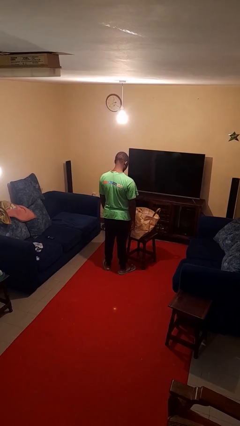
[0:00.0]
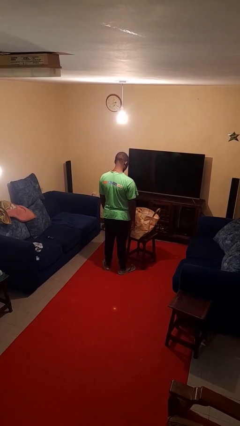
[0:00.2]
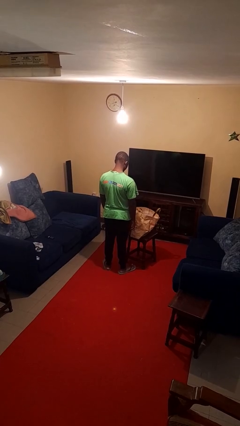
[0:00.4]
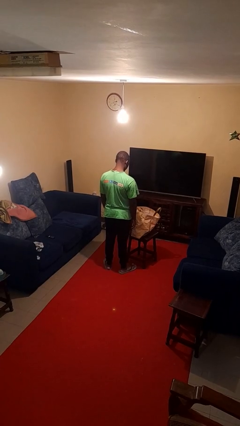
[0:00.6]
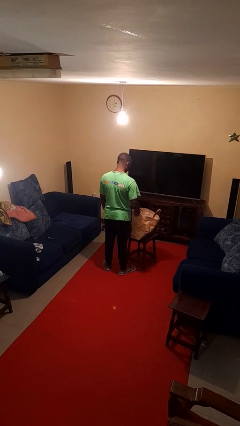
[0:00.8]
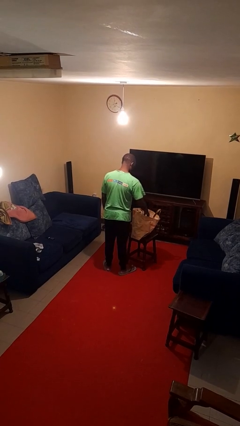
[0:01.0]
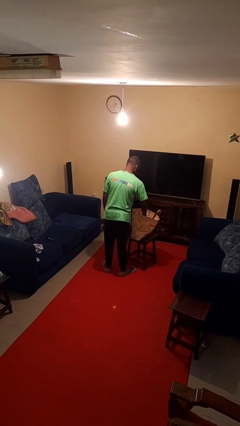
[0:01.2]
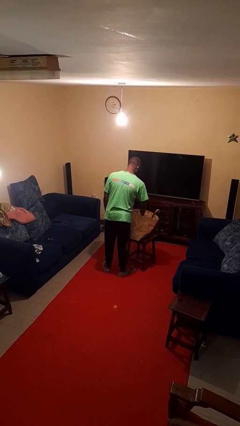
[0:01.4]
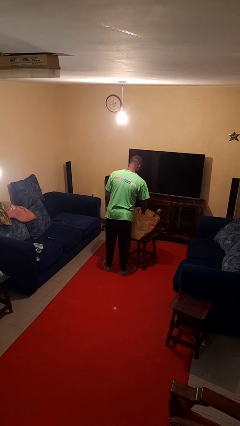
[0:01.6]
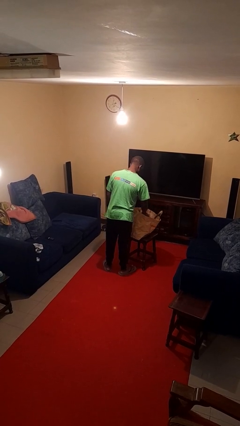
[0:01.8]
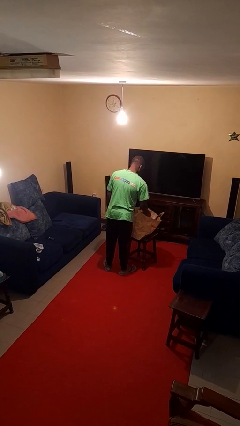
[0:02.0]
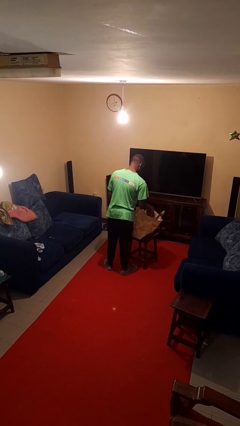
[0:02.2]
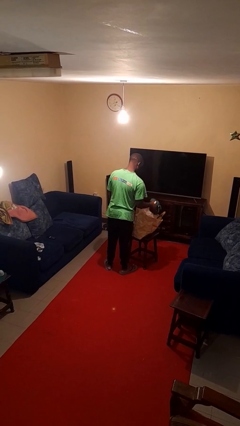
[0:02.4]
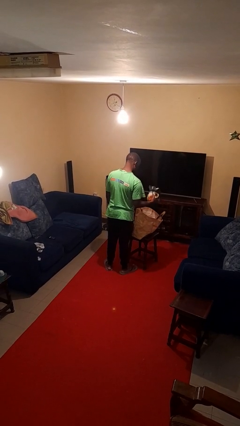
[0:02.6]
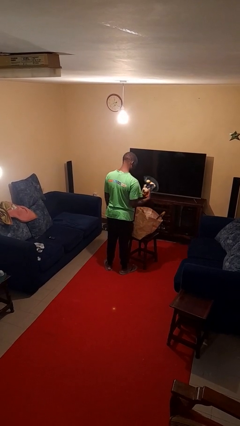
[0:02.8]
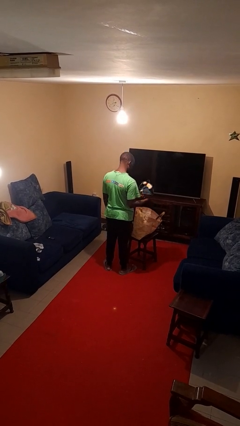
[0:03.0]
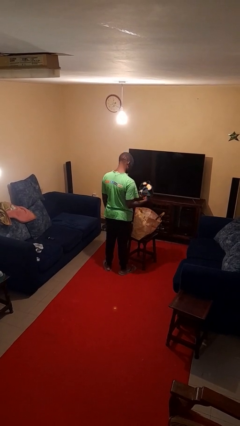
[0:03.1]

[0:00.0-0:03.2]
person takes object from bag

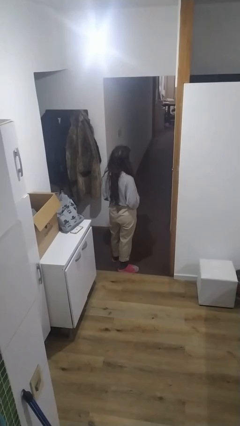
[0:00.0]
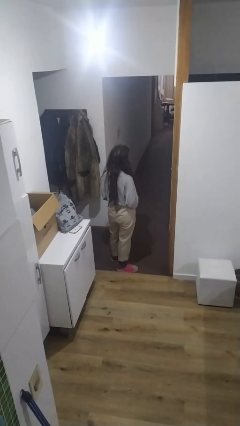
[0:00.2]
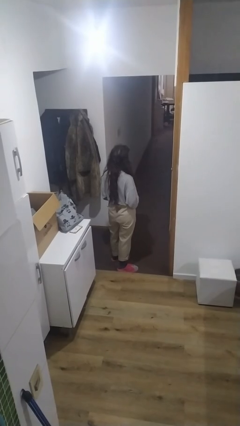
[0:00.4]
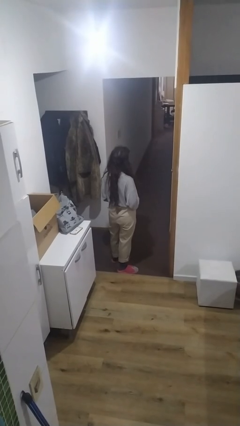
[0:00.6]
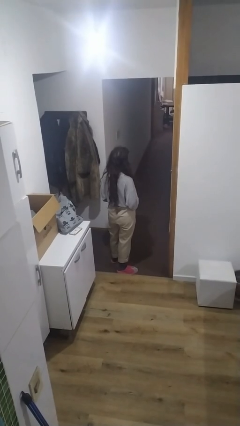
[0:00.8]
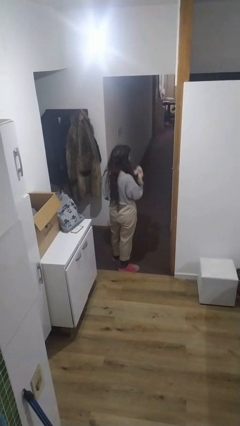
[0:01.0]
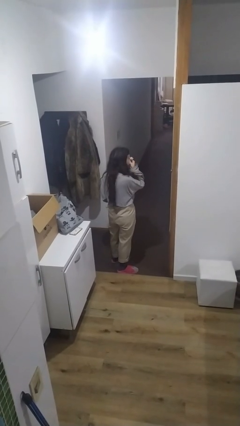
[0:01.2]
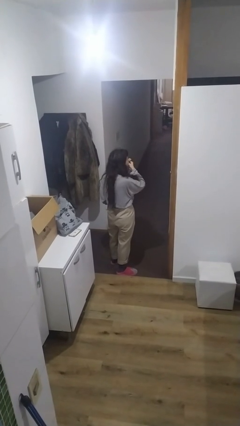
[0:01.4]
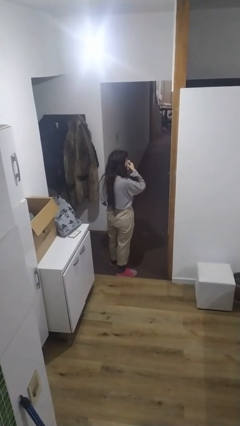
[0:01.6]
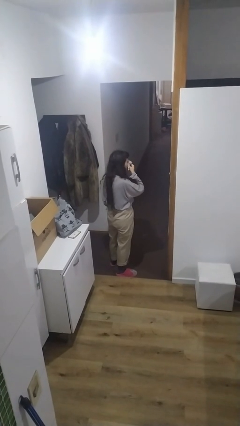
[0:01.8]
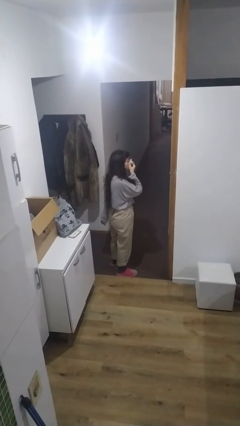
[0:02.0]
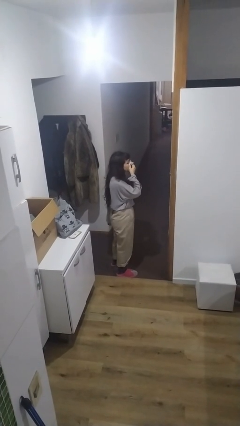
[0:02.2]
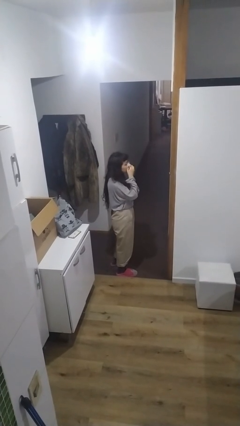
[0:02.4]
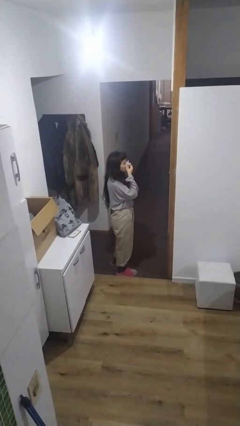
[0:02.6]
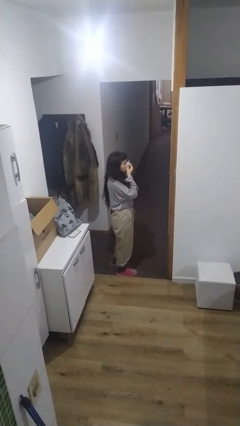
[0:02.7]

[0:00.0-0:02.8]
person blows nose

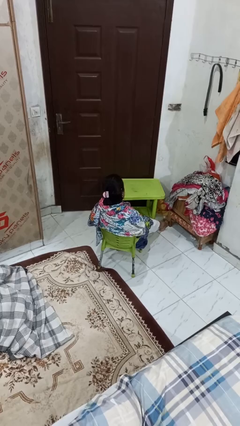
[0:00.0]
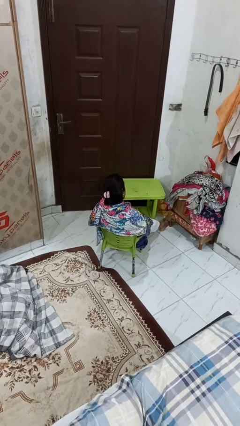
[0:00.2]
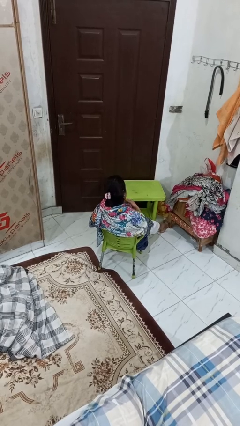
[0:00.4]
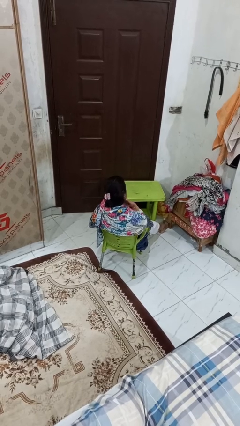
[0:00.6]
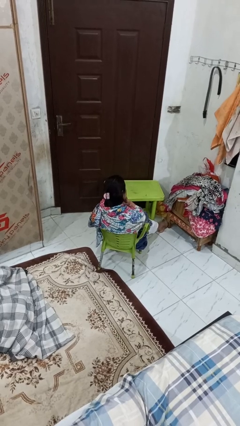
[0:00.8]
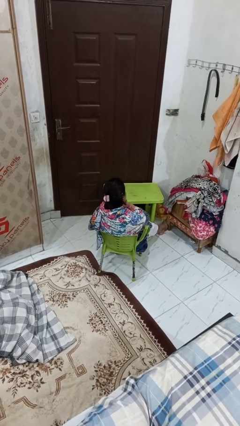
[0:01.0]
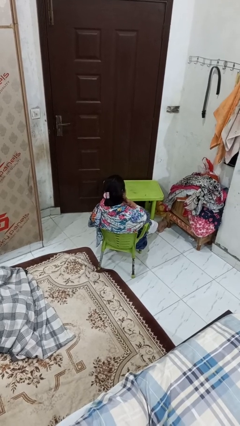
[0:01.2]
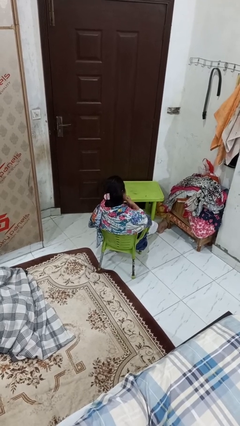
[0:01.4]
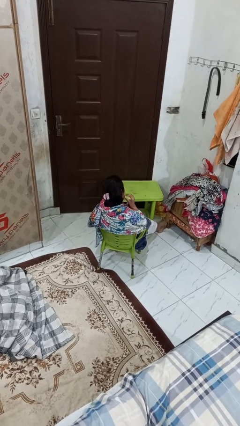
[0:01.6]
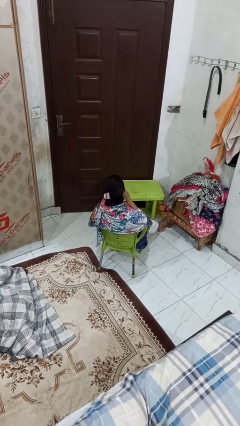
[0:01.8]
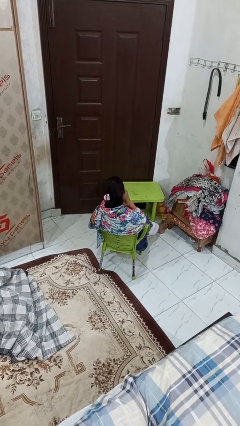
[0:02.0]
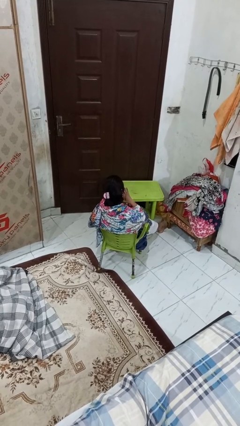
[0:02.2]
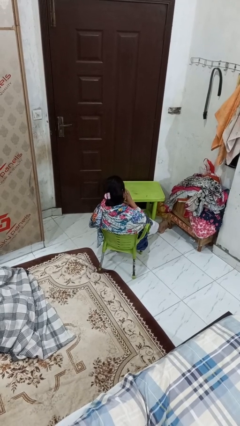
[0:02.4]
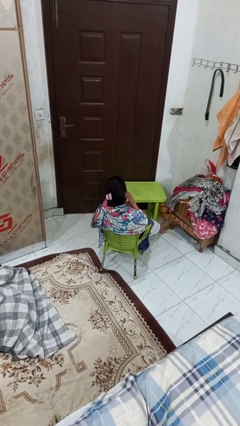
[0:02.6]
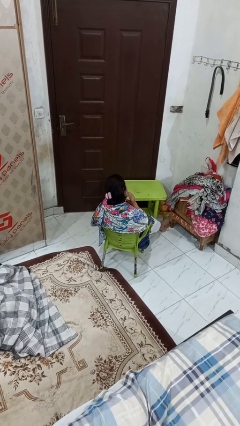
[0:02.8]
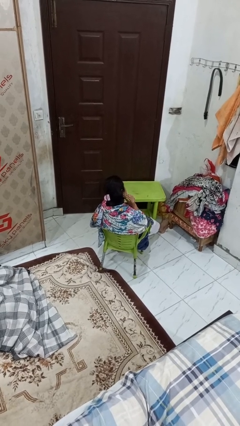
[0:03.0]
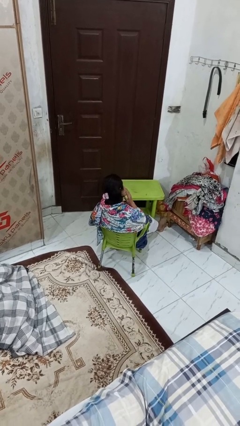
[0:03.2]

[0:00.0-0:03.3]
person strokes chin

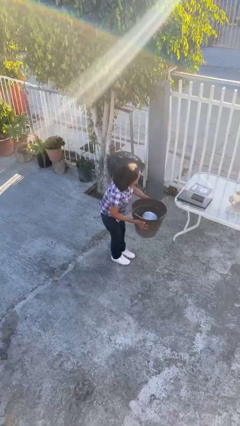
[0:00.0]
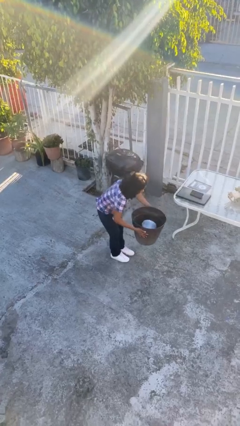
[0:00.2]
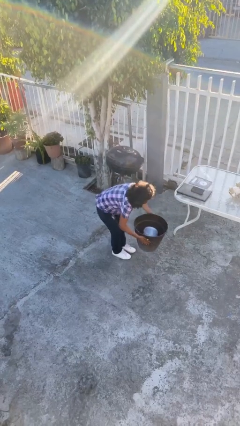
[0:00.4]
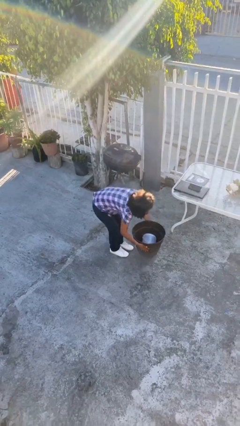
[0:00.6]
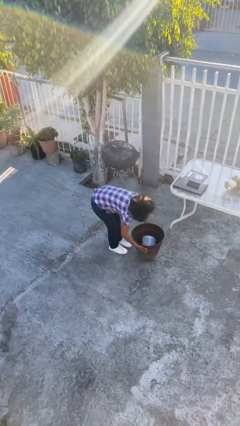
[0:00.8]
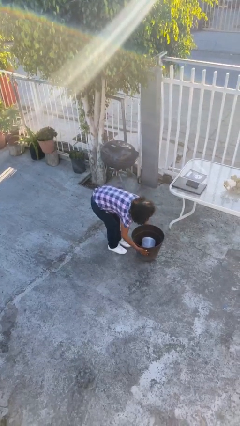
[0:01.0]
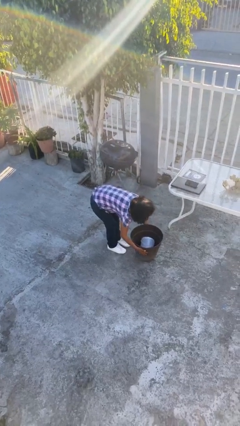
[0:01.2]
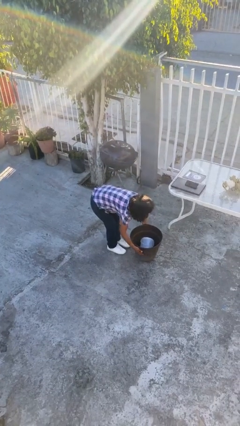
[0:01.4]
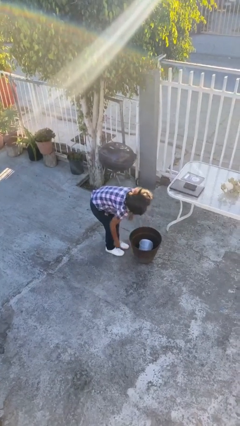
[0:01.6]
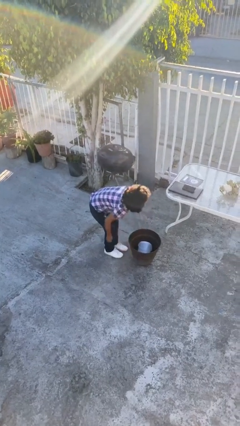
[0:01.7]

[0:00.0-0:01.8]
person puts down object on floor

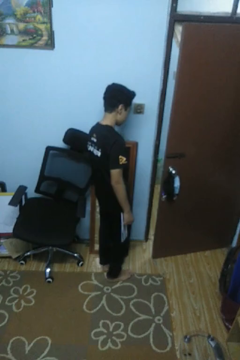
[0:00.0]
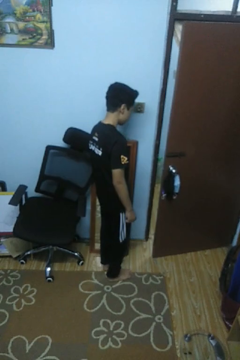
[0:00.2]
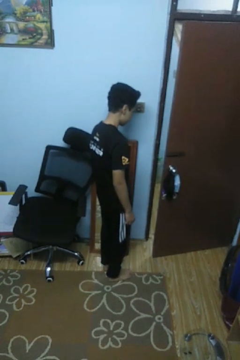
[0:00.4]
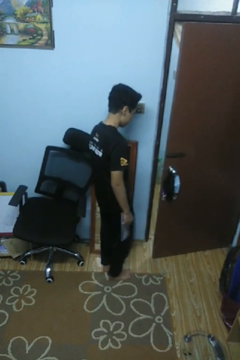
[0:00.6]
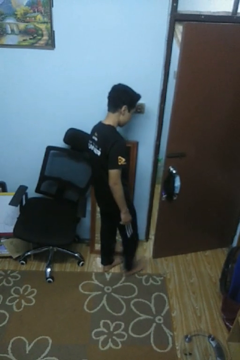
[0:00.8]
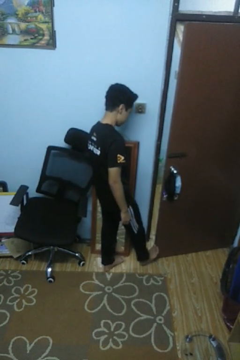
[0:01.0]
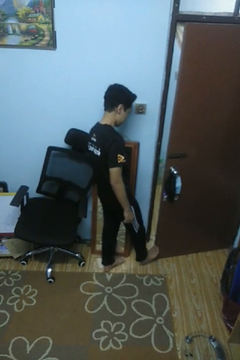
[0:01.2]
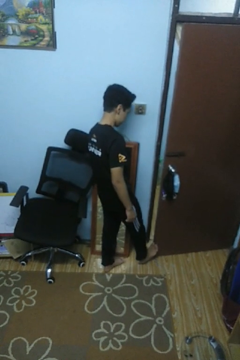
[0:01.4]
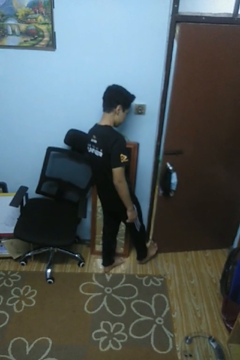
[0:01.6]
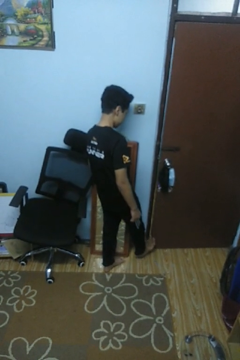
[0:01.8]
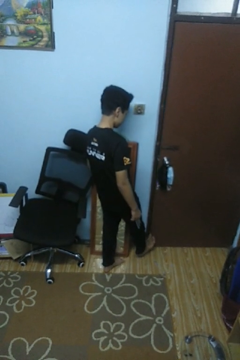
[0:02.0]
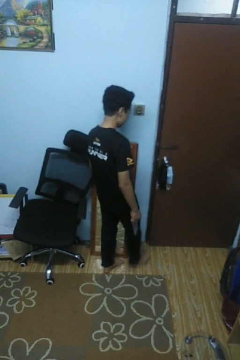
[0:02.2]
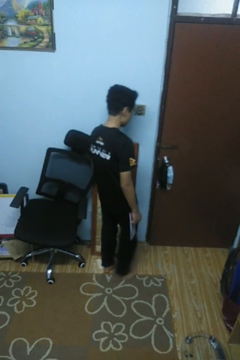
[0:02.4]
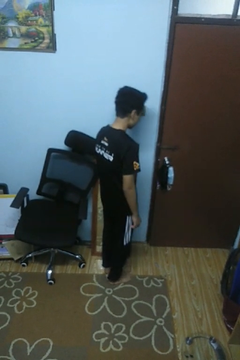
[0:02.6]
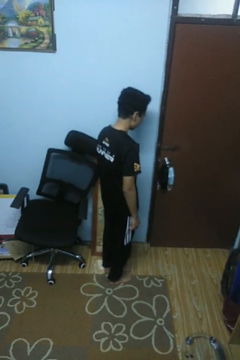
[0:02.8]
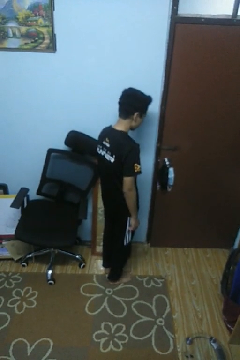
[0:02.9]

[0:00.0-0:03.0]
person closes door with foot

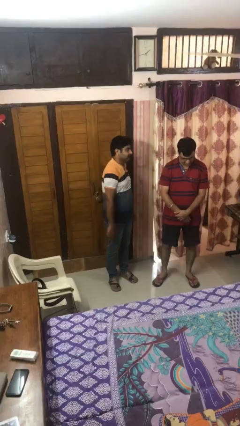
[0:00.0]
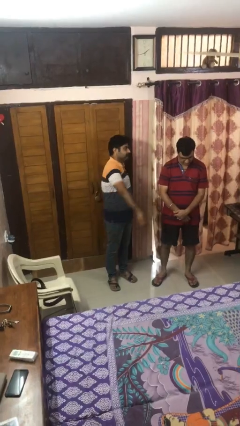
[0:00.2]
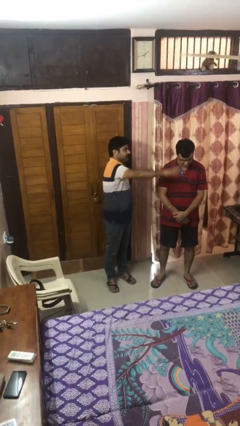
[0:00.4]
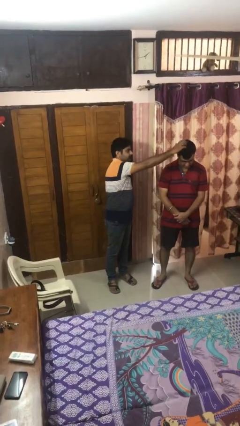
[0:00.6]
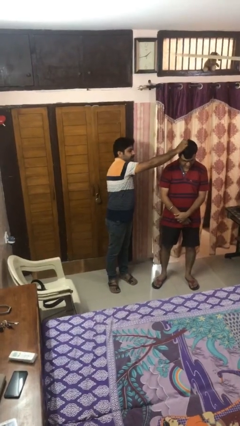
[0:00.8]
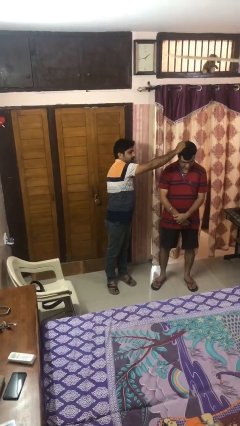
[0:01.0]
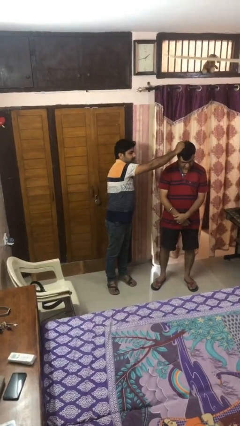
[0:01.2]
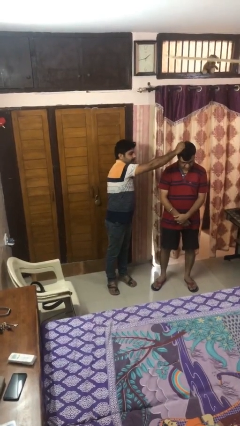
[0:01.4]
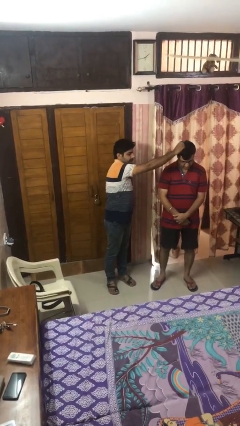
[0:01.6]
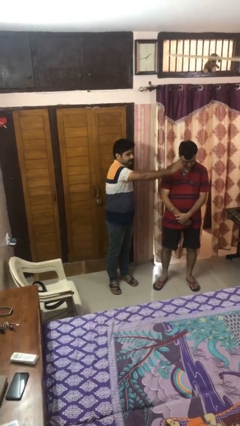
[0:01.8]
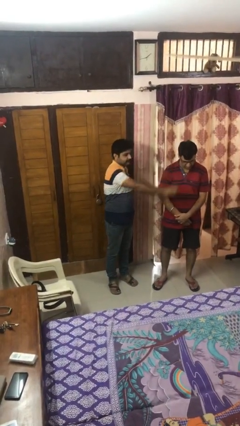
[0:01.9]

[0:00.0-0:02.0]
person grabs person by hair

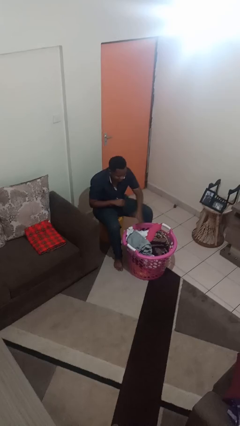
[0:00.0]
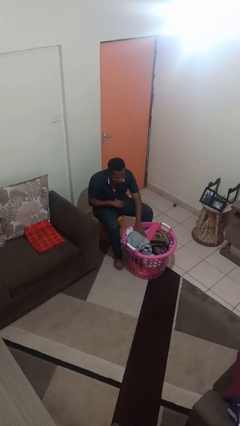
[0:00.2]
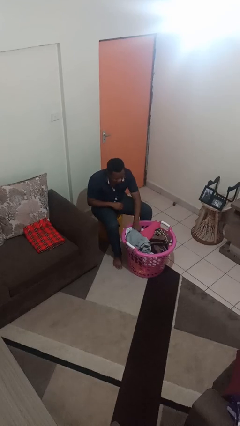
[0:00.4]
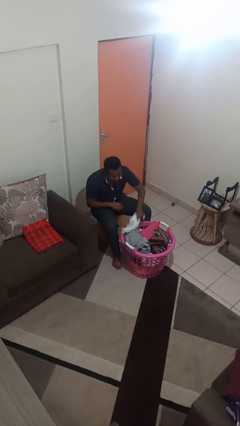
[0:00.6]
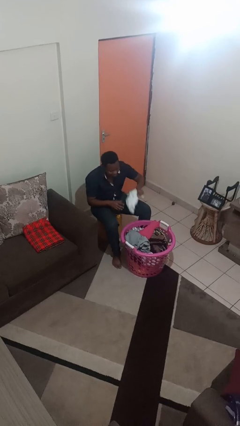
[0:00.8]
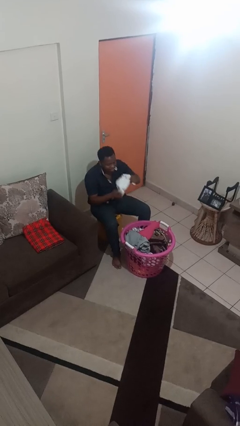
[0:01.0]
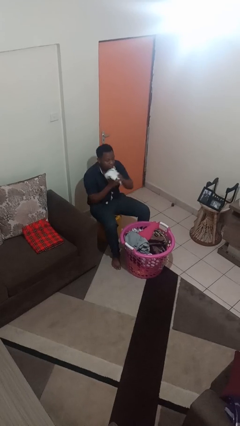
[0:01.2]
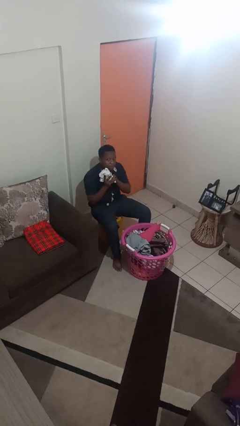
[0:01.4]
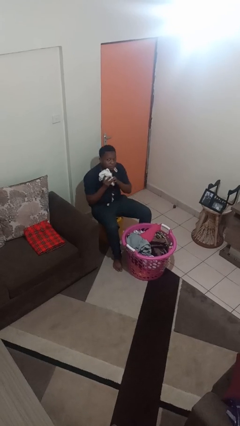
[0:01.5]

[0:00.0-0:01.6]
person takes object from basket
